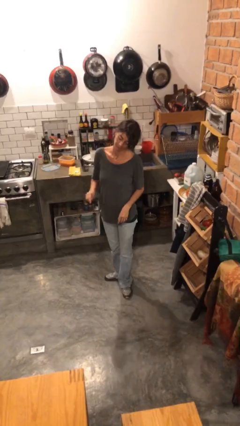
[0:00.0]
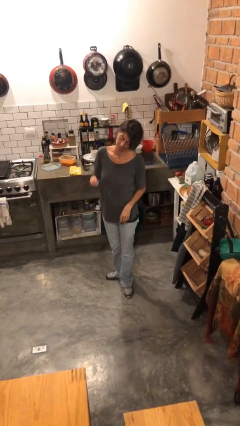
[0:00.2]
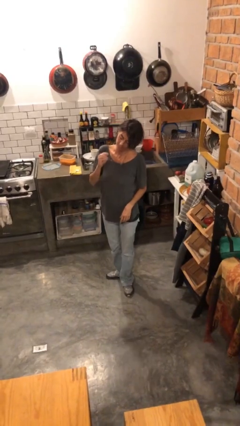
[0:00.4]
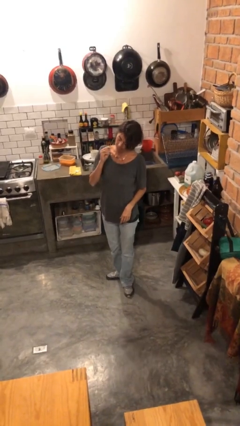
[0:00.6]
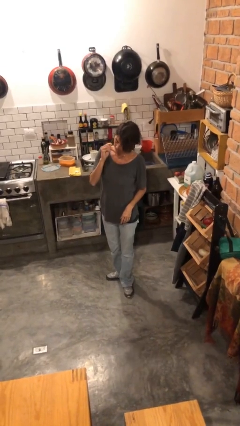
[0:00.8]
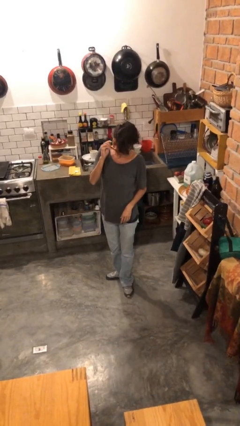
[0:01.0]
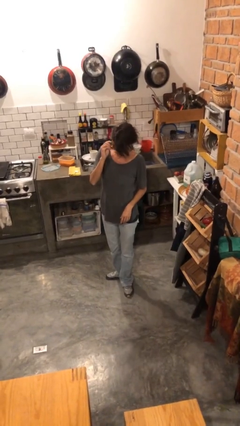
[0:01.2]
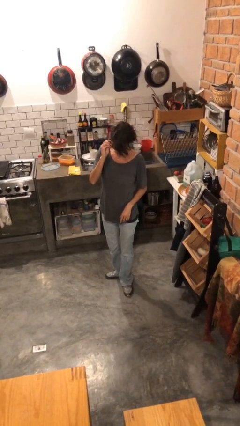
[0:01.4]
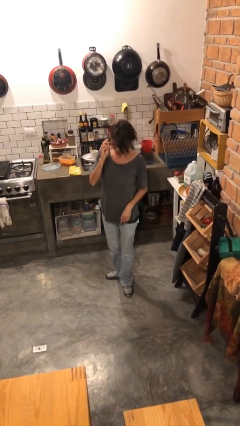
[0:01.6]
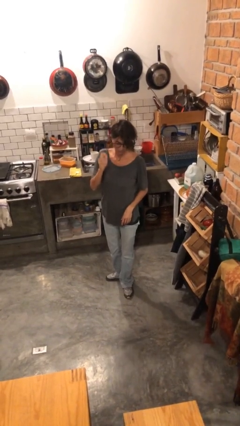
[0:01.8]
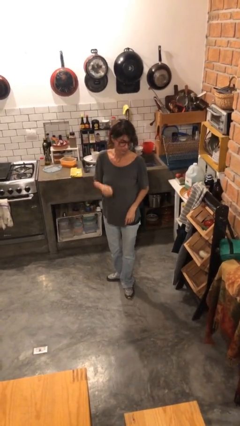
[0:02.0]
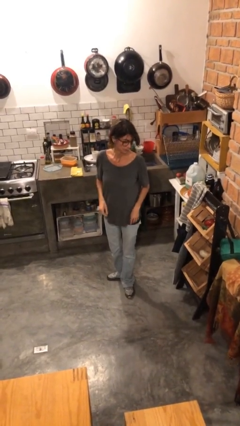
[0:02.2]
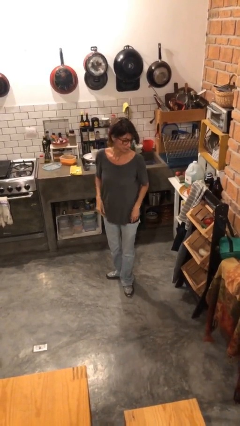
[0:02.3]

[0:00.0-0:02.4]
person puts on glasses

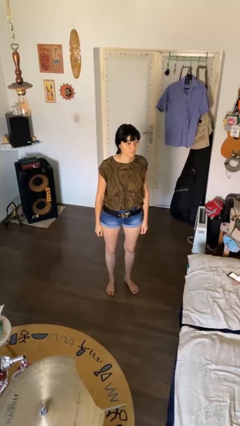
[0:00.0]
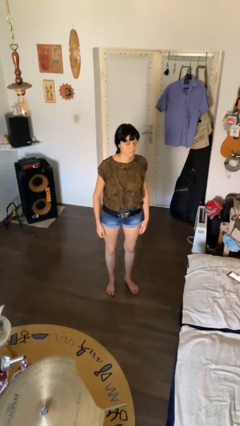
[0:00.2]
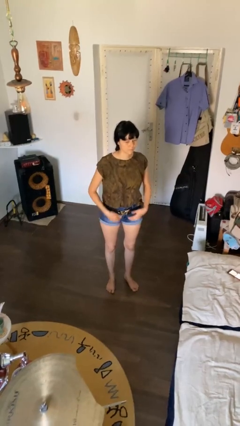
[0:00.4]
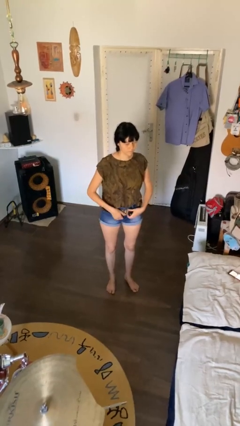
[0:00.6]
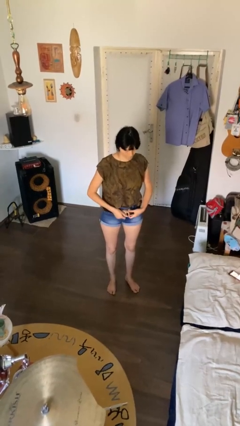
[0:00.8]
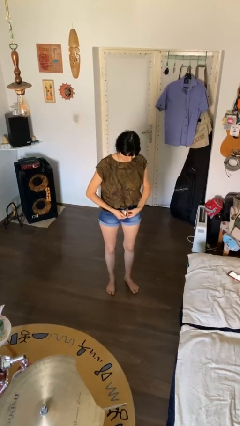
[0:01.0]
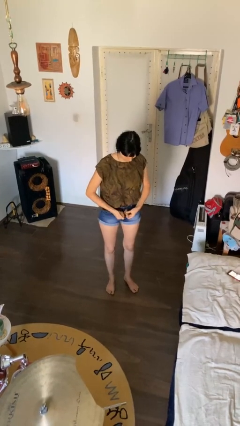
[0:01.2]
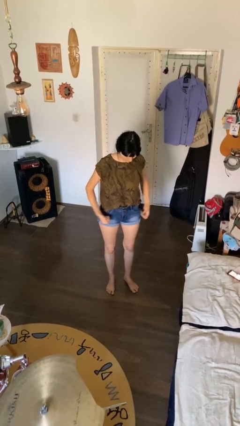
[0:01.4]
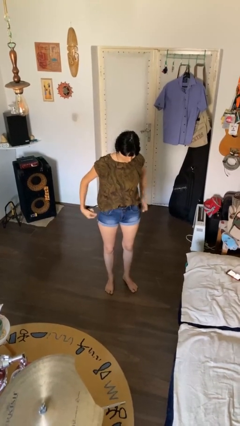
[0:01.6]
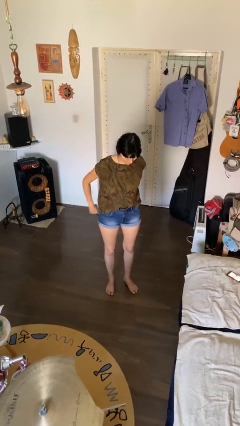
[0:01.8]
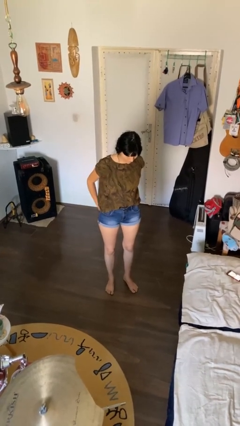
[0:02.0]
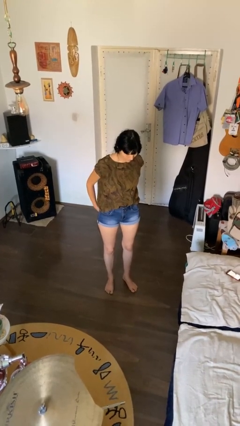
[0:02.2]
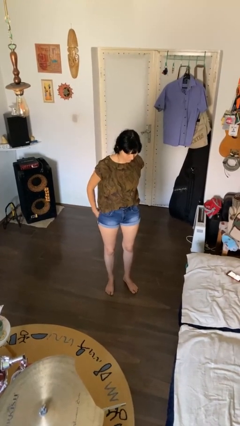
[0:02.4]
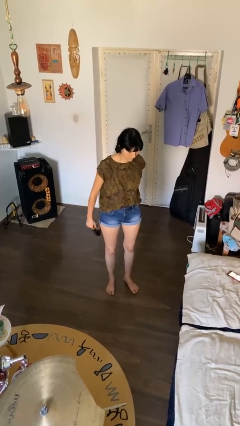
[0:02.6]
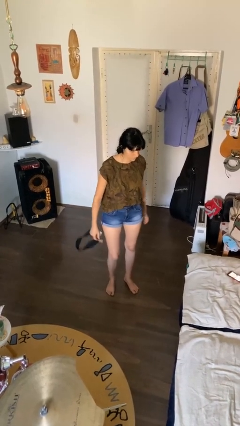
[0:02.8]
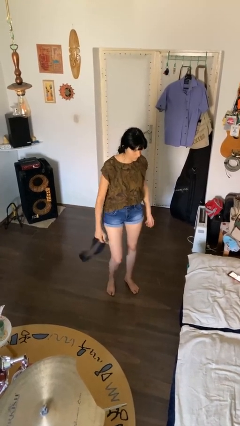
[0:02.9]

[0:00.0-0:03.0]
person takes off belt

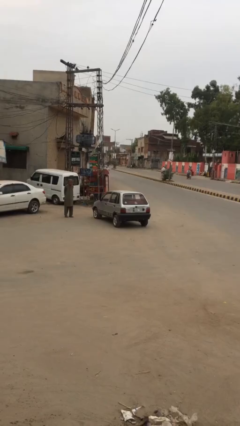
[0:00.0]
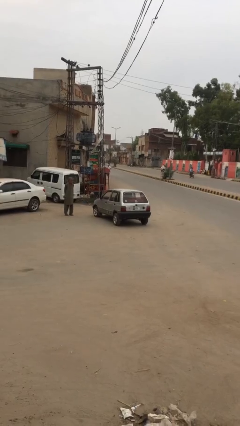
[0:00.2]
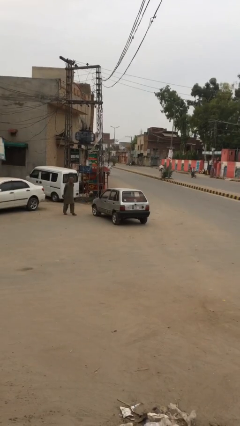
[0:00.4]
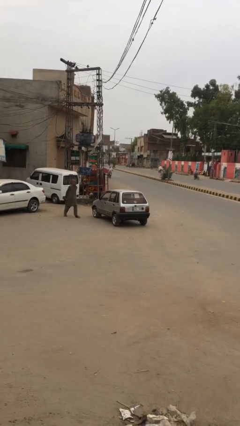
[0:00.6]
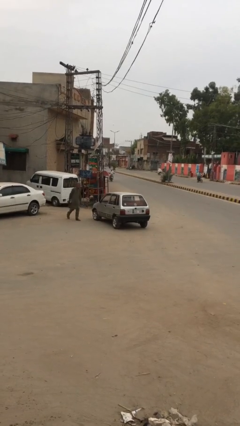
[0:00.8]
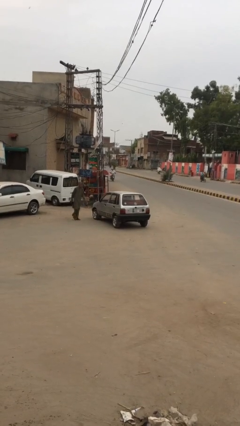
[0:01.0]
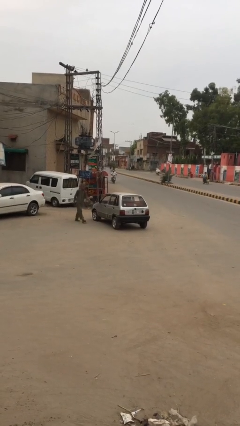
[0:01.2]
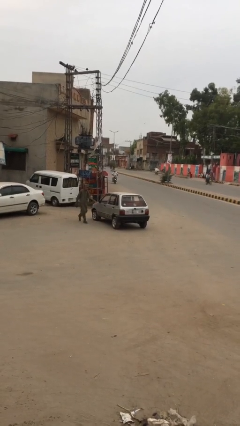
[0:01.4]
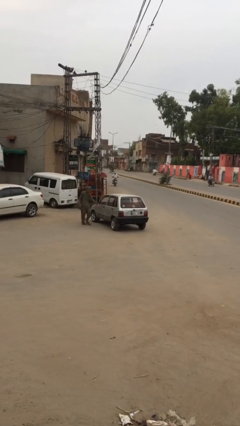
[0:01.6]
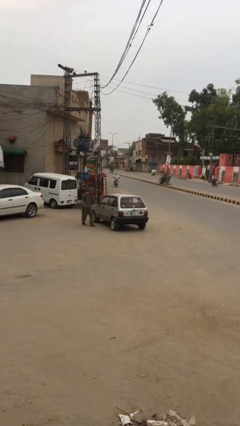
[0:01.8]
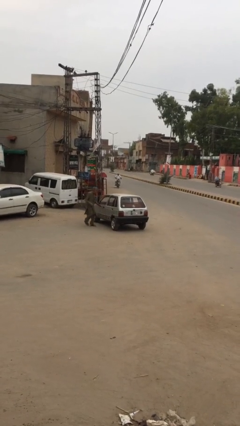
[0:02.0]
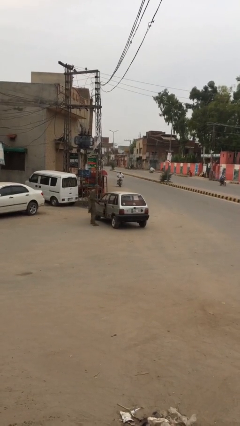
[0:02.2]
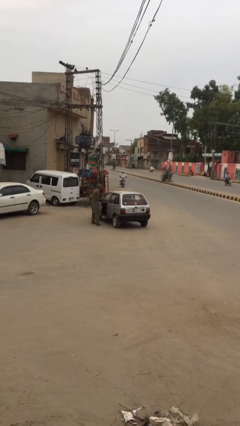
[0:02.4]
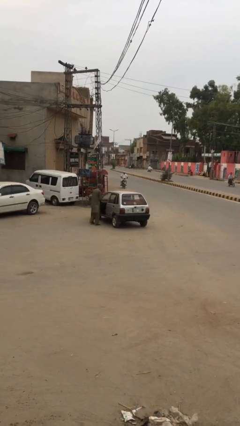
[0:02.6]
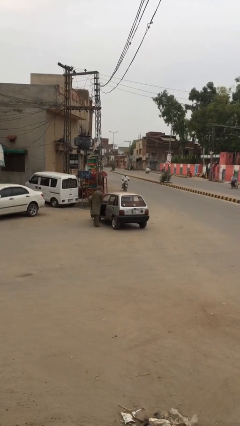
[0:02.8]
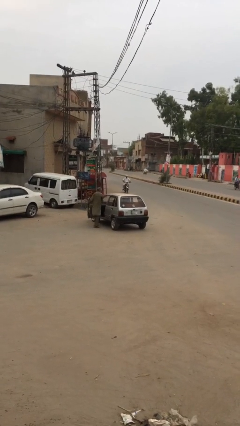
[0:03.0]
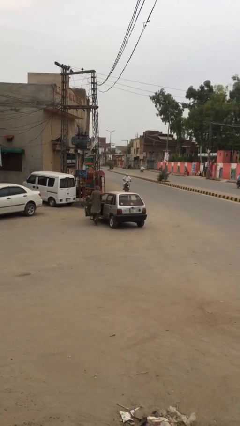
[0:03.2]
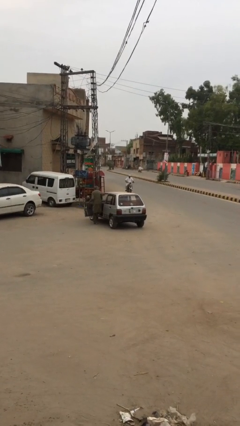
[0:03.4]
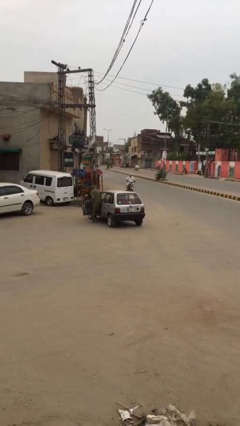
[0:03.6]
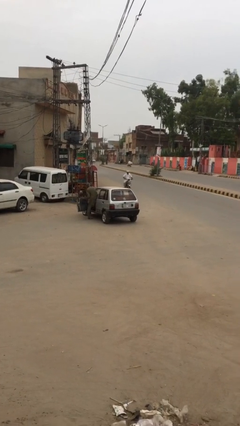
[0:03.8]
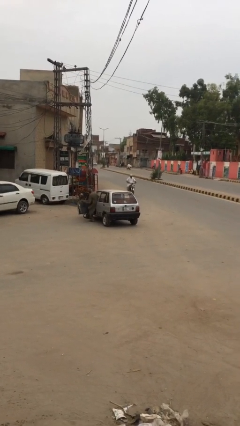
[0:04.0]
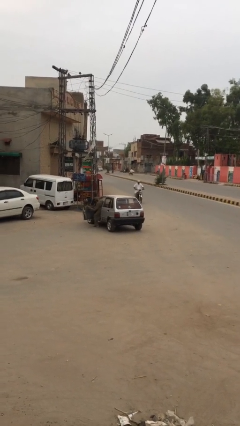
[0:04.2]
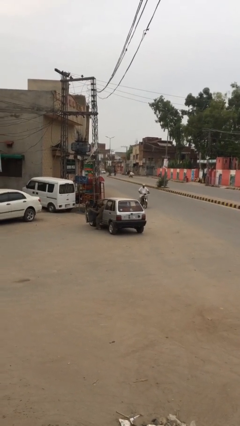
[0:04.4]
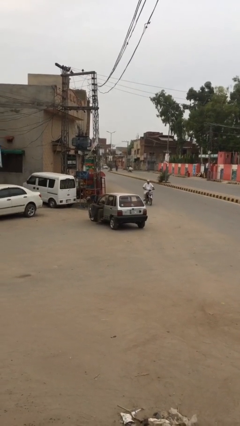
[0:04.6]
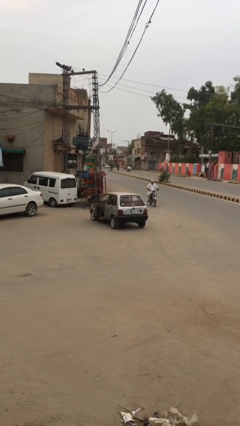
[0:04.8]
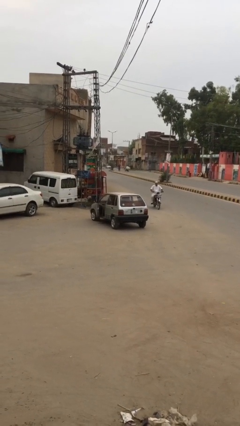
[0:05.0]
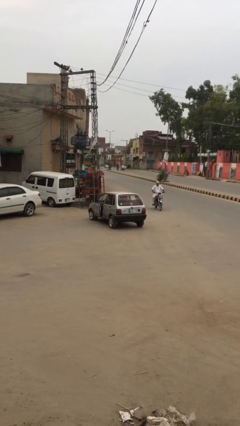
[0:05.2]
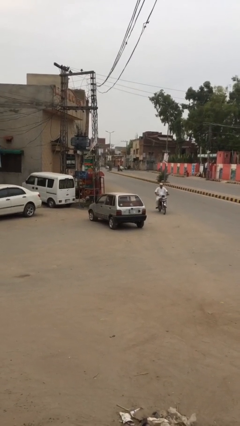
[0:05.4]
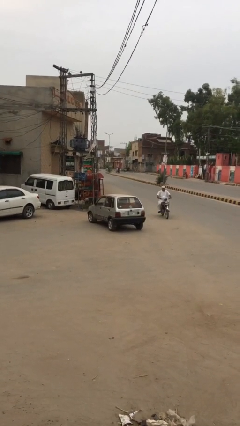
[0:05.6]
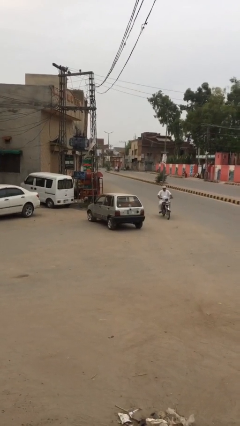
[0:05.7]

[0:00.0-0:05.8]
car picks up person

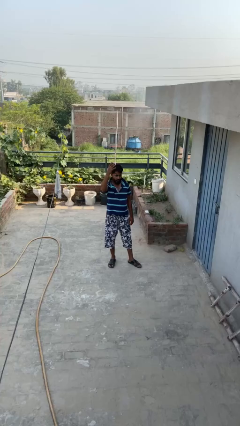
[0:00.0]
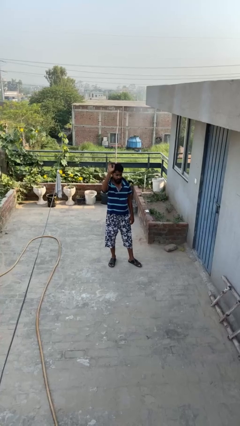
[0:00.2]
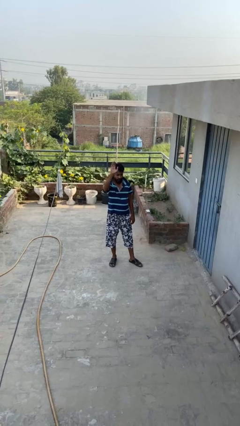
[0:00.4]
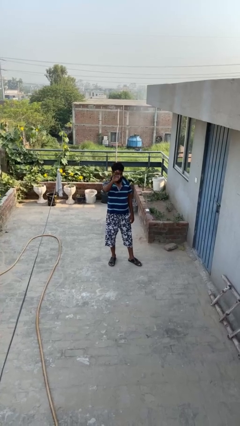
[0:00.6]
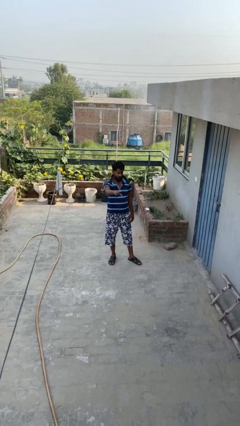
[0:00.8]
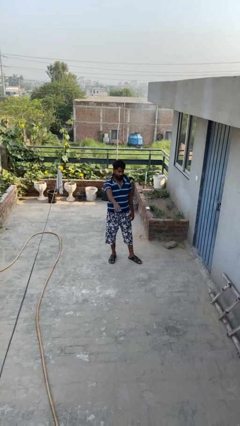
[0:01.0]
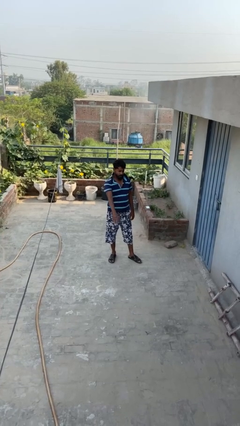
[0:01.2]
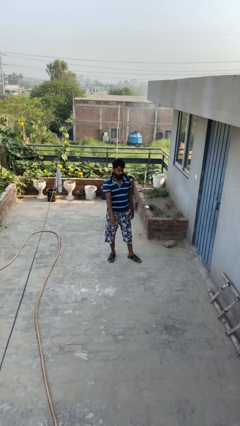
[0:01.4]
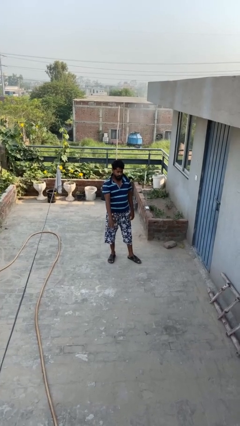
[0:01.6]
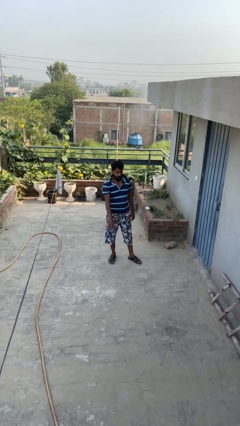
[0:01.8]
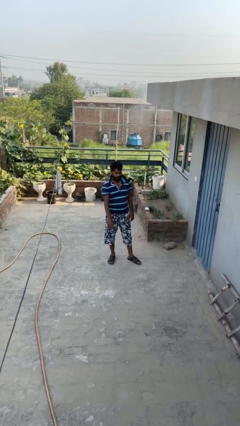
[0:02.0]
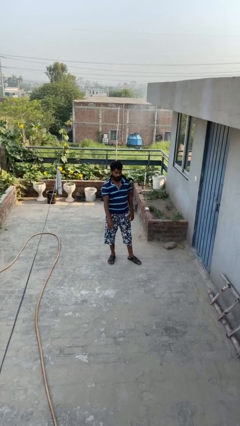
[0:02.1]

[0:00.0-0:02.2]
person gestures swipe down

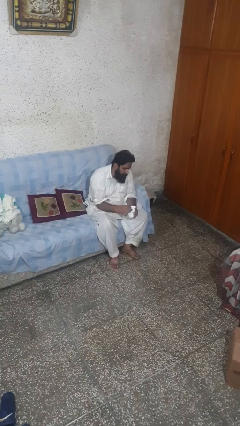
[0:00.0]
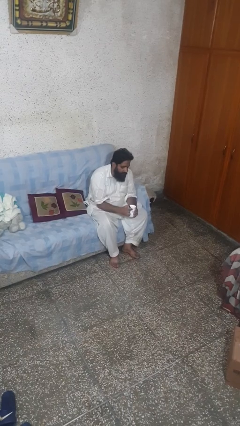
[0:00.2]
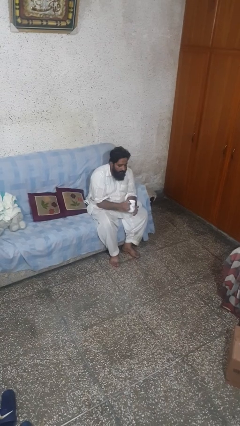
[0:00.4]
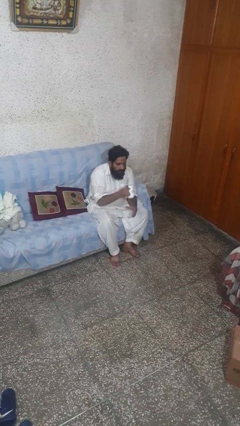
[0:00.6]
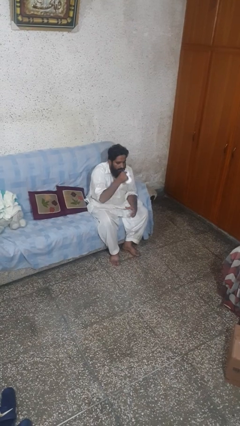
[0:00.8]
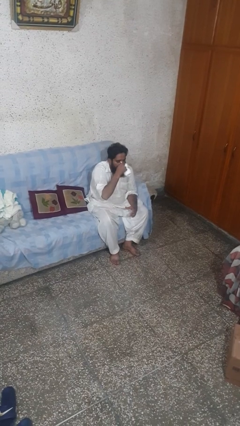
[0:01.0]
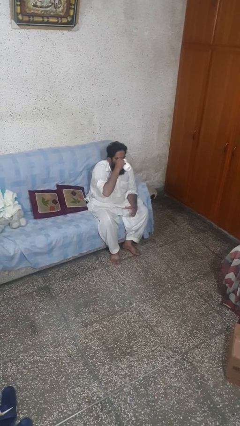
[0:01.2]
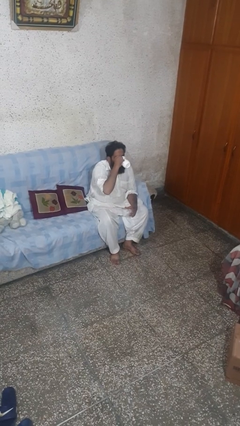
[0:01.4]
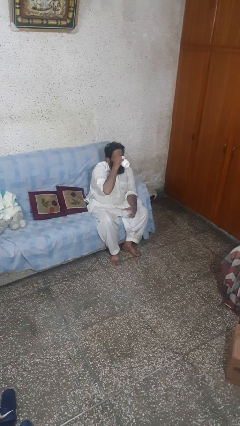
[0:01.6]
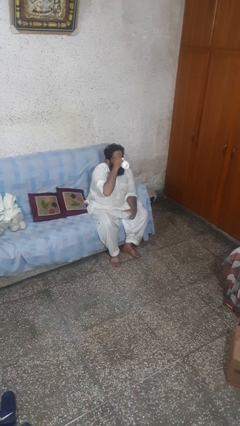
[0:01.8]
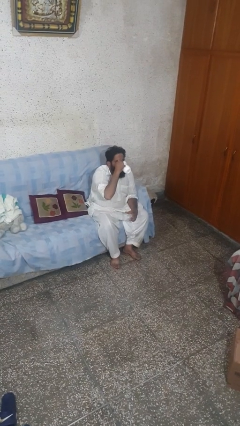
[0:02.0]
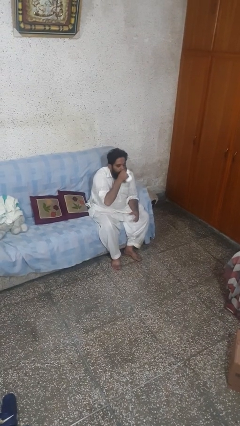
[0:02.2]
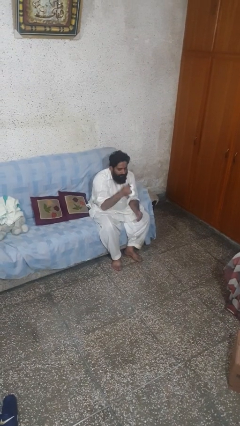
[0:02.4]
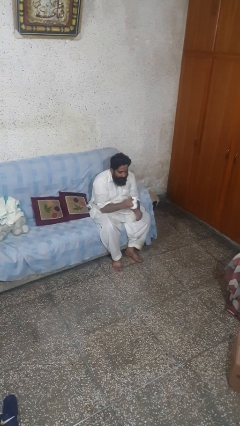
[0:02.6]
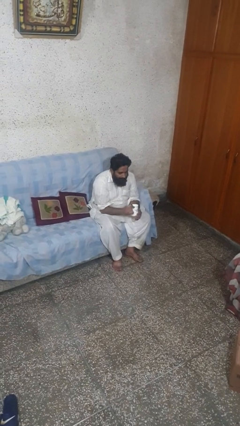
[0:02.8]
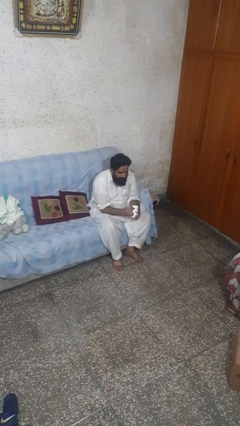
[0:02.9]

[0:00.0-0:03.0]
person drinks from mug

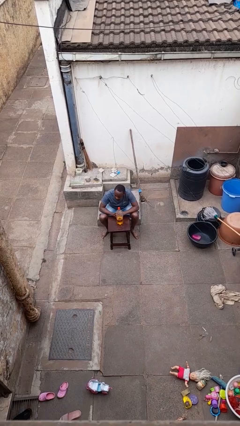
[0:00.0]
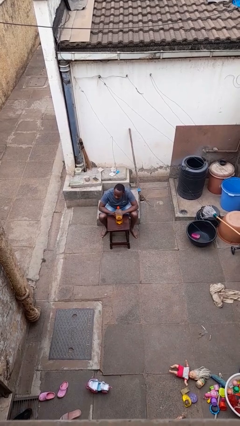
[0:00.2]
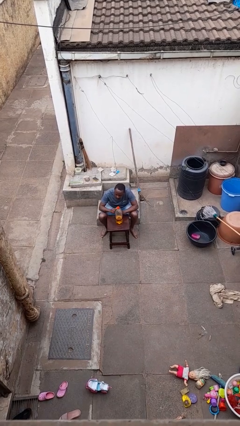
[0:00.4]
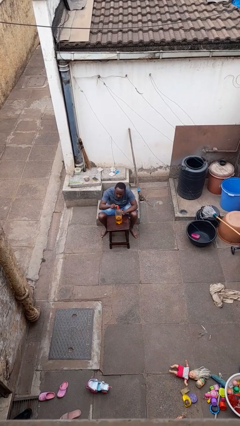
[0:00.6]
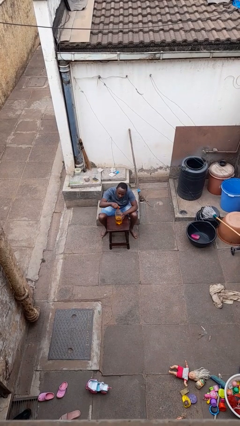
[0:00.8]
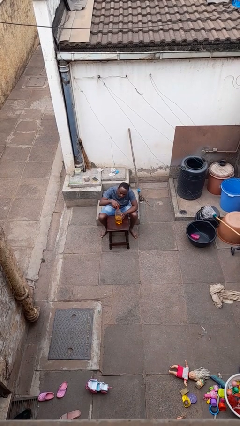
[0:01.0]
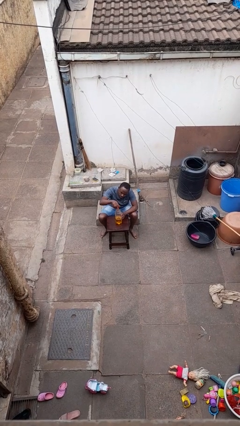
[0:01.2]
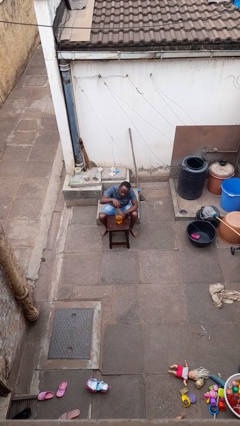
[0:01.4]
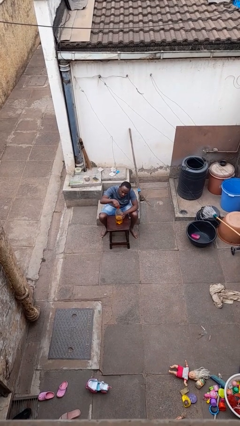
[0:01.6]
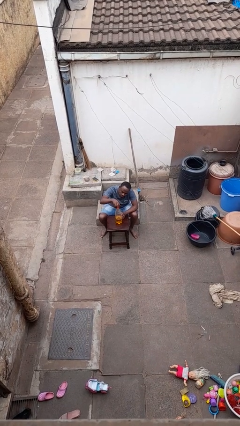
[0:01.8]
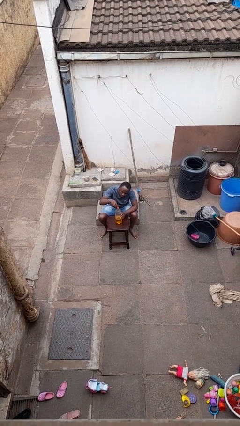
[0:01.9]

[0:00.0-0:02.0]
person unscrews lid from bottle
